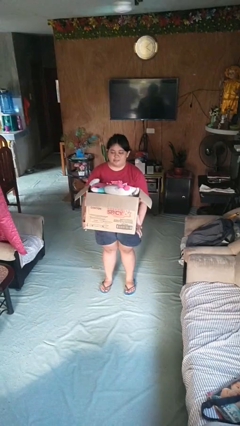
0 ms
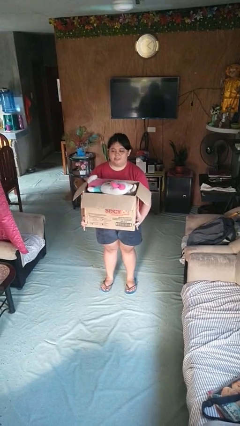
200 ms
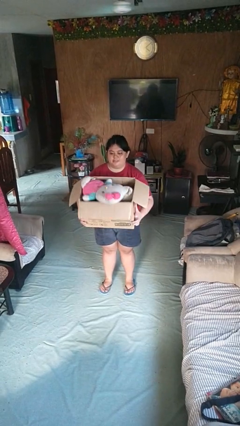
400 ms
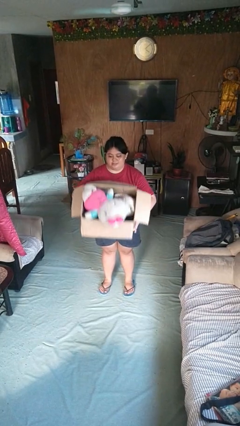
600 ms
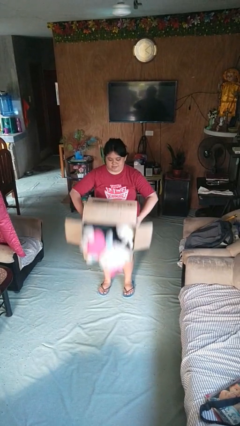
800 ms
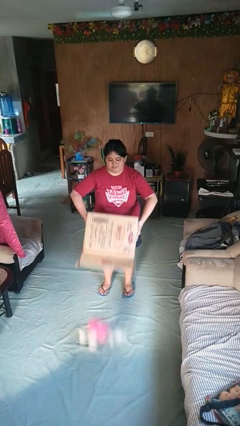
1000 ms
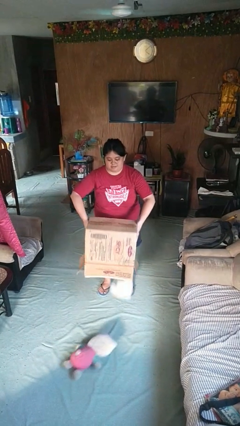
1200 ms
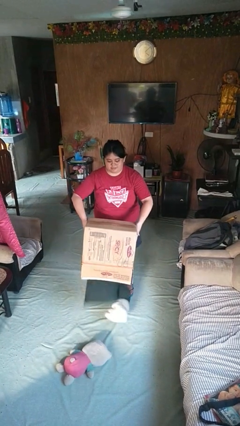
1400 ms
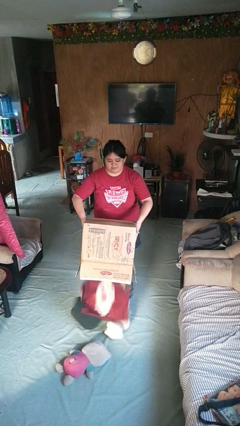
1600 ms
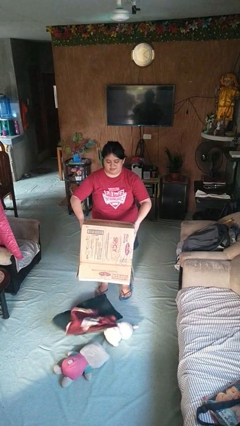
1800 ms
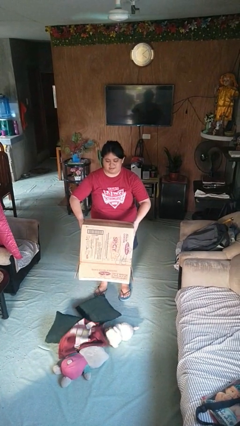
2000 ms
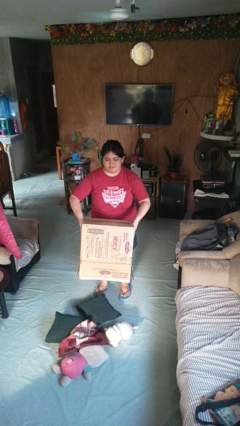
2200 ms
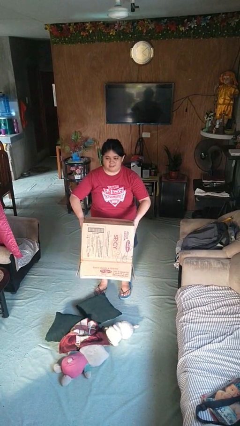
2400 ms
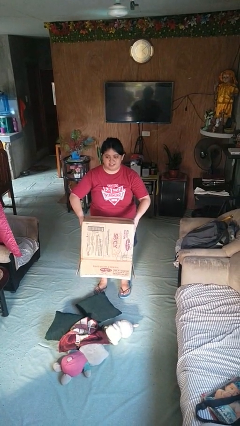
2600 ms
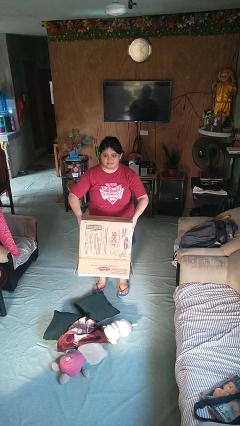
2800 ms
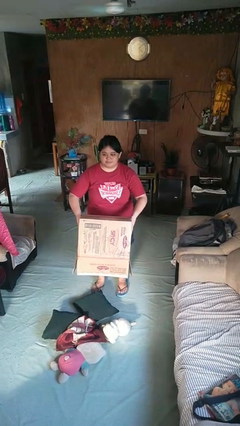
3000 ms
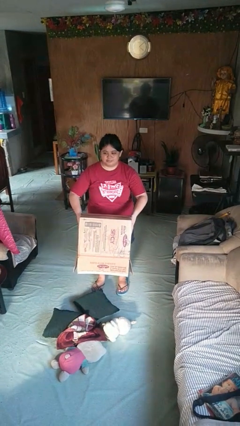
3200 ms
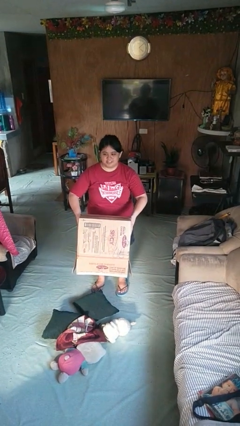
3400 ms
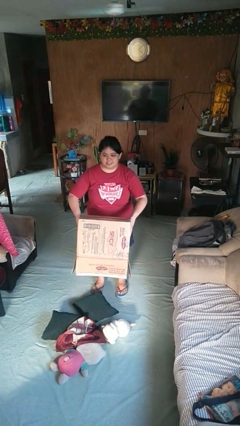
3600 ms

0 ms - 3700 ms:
person unloads box onto floor

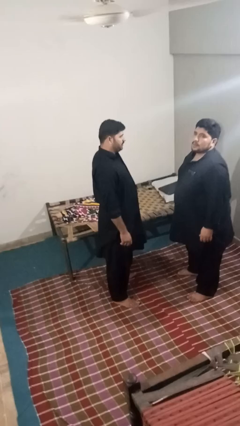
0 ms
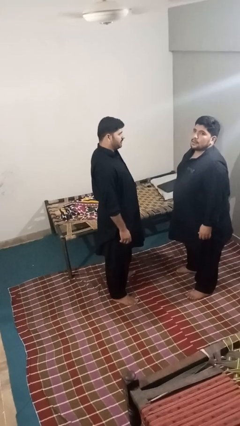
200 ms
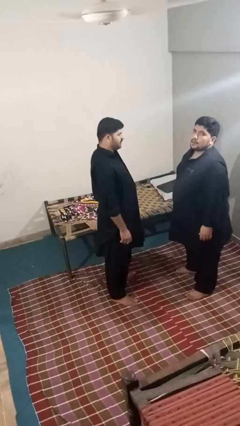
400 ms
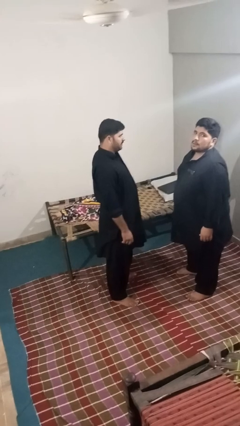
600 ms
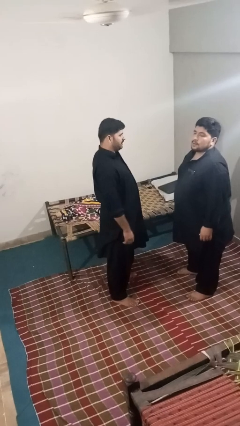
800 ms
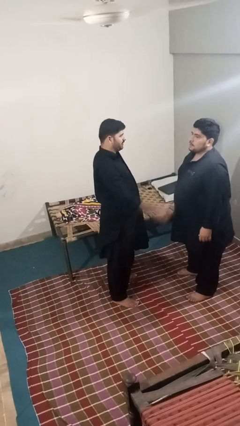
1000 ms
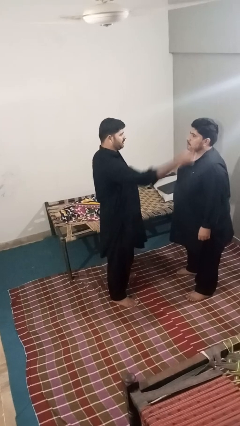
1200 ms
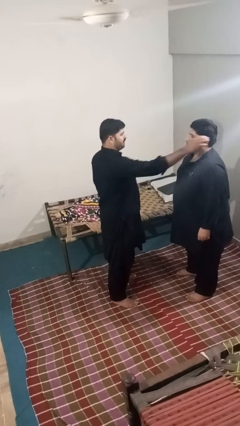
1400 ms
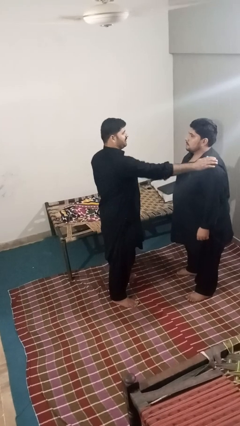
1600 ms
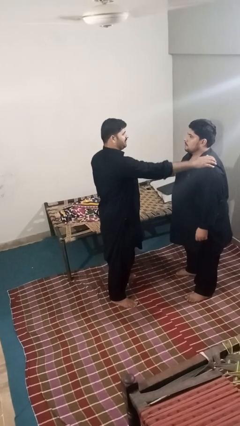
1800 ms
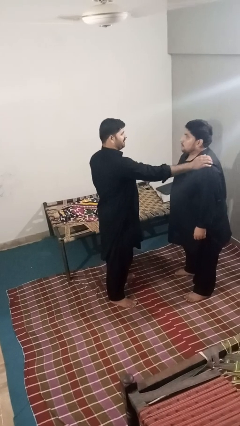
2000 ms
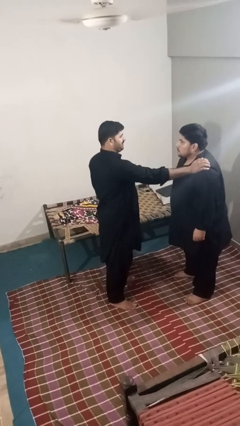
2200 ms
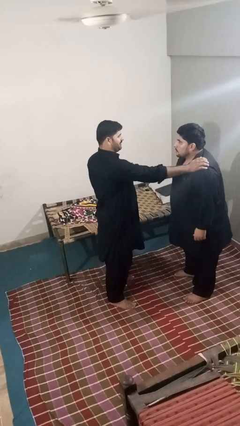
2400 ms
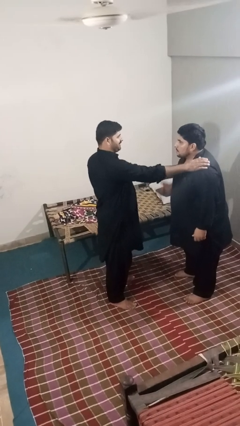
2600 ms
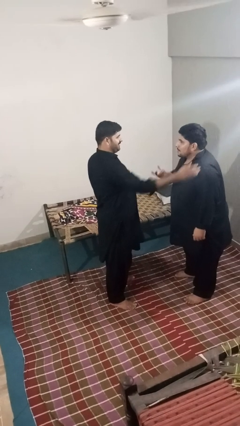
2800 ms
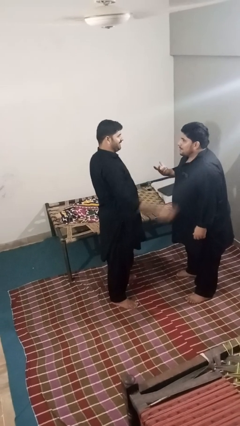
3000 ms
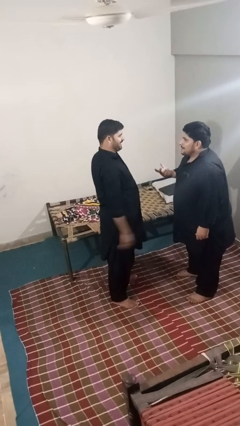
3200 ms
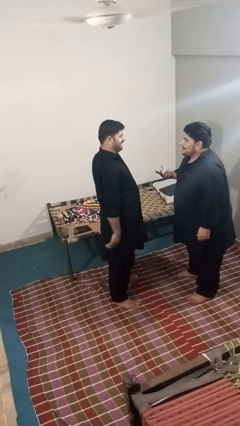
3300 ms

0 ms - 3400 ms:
person pounds shoulders of person

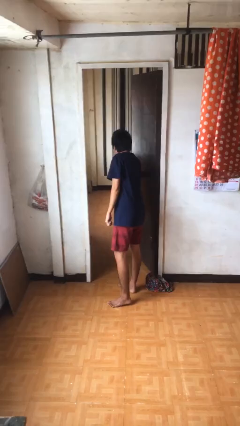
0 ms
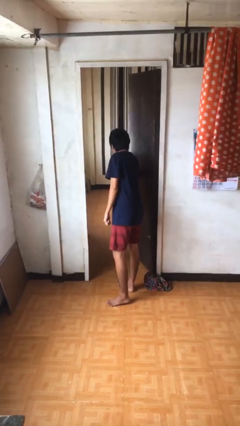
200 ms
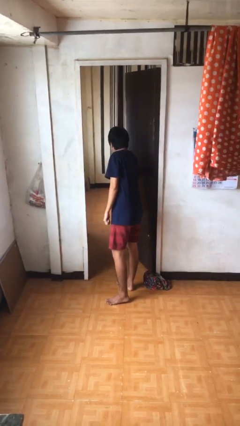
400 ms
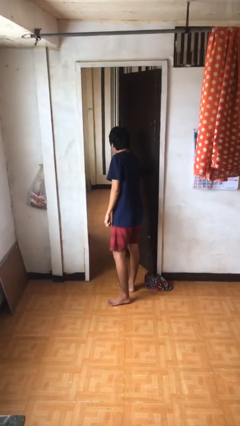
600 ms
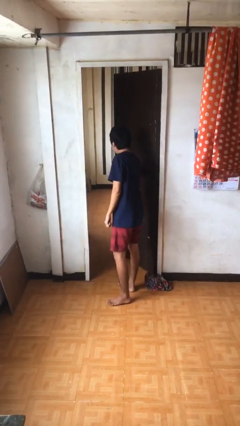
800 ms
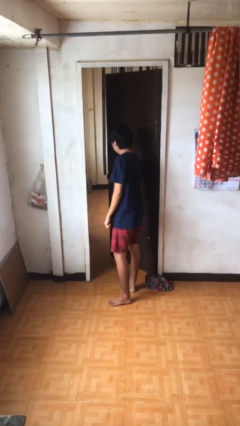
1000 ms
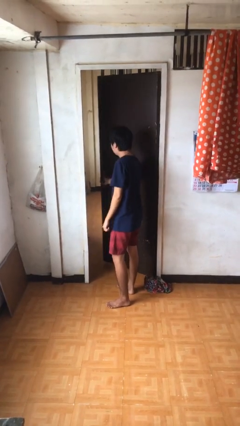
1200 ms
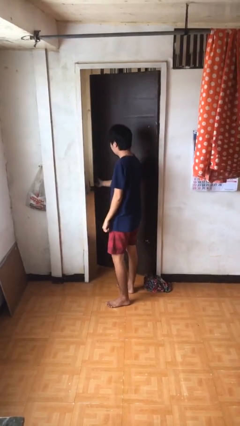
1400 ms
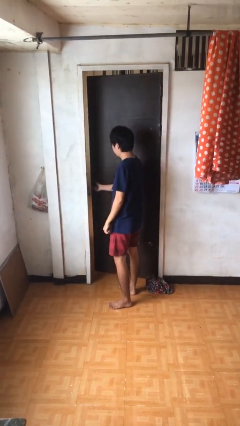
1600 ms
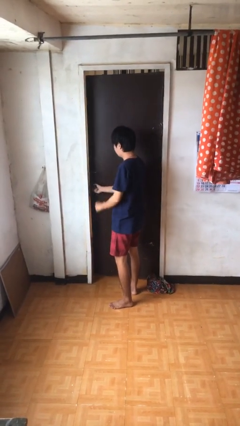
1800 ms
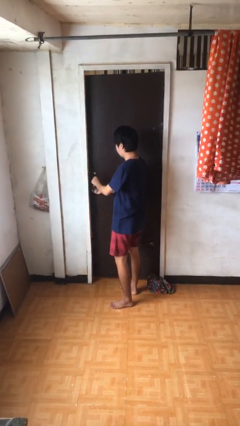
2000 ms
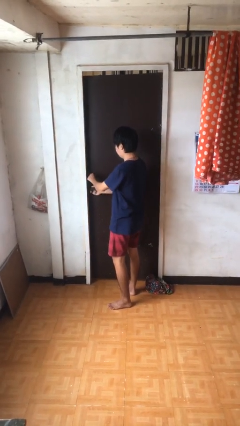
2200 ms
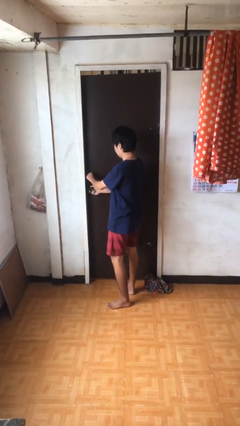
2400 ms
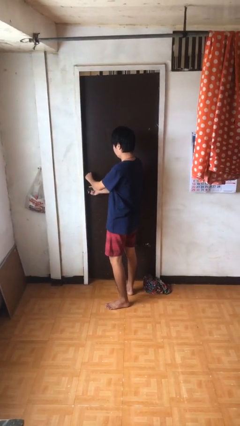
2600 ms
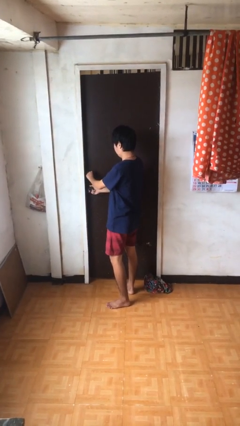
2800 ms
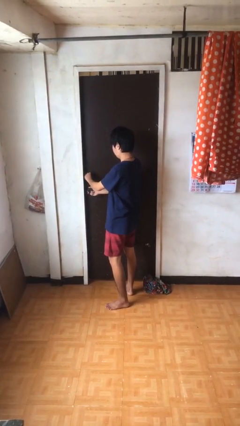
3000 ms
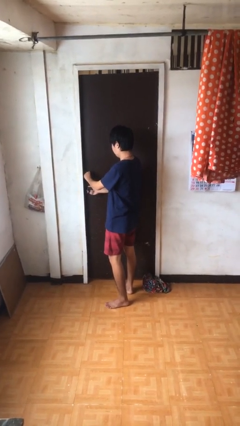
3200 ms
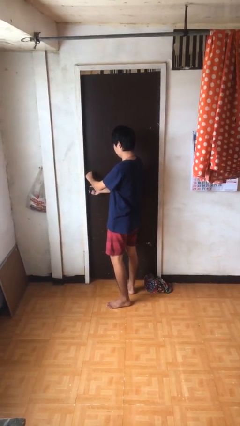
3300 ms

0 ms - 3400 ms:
person closes facility door

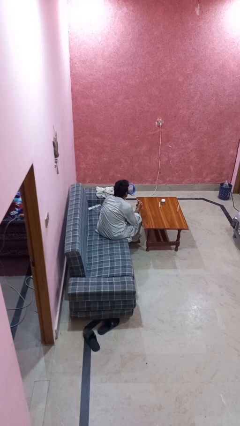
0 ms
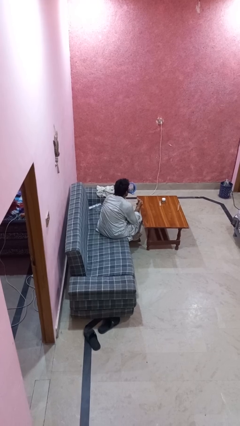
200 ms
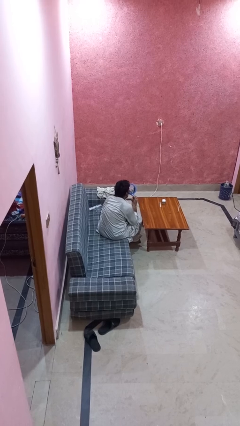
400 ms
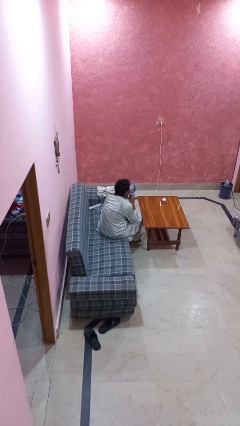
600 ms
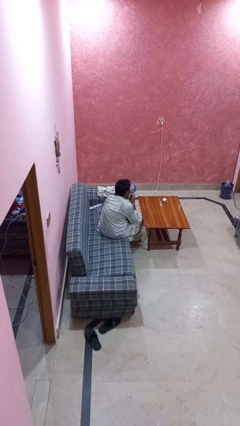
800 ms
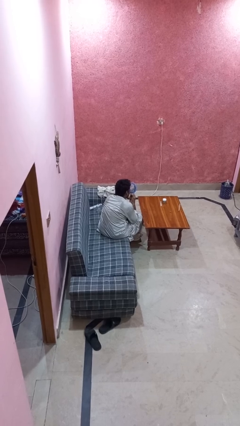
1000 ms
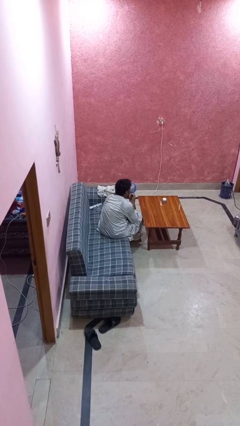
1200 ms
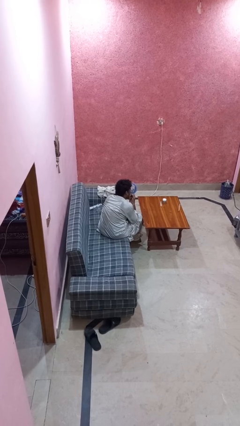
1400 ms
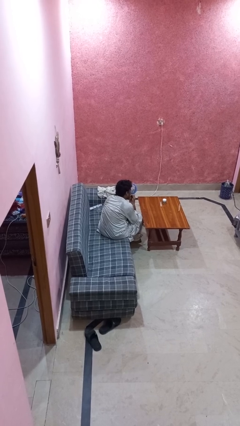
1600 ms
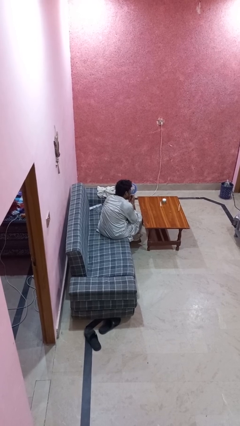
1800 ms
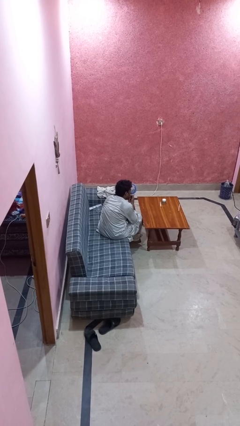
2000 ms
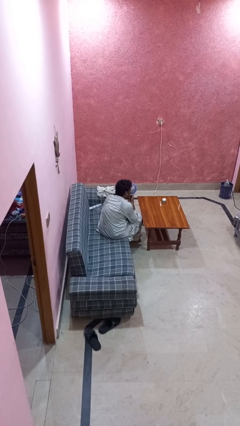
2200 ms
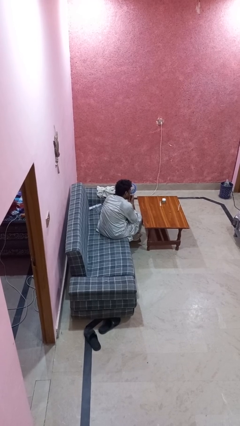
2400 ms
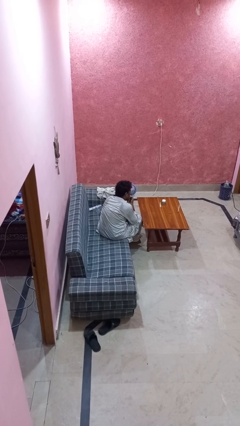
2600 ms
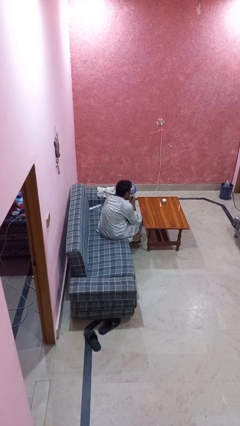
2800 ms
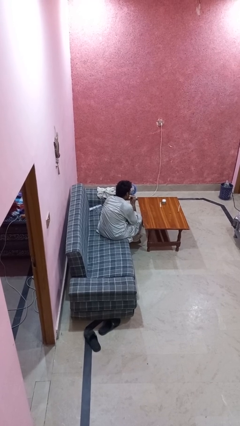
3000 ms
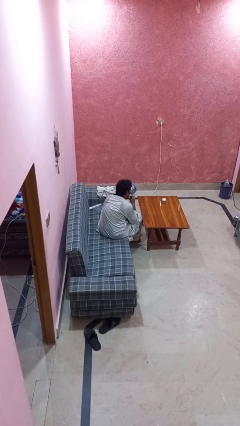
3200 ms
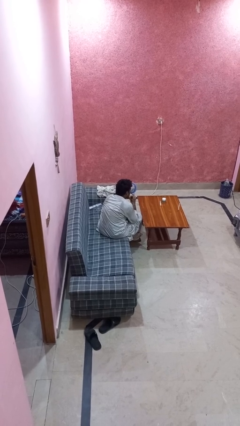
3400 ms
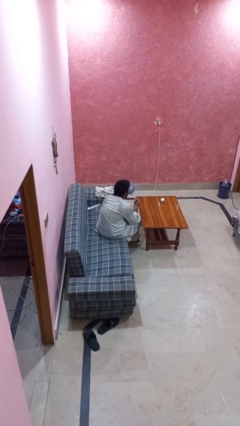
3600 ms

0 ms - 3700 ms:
person applies lip makeup

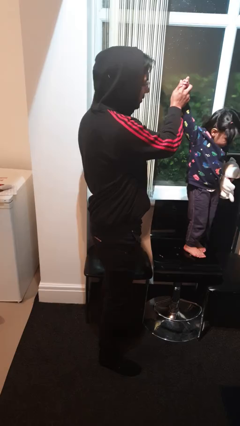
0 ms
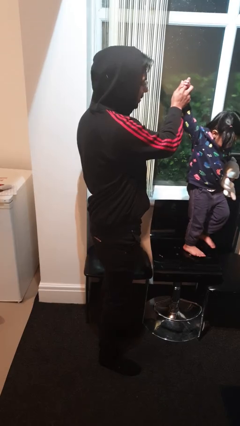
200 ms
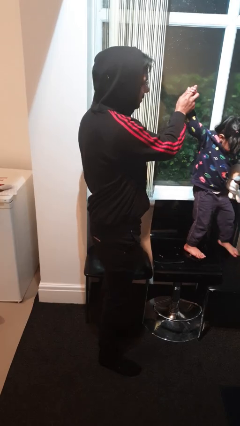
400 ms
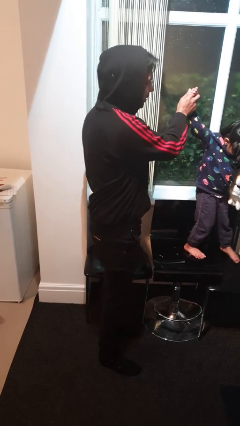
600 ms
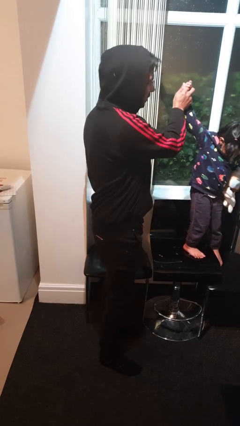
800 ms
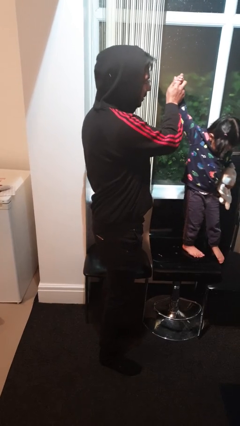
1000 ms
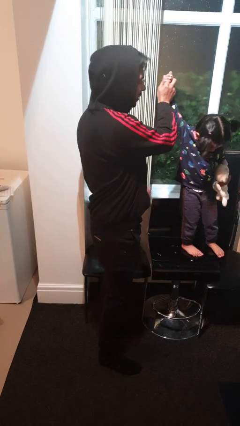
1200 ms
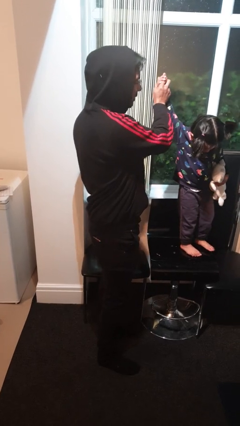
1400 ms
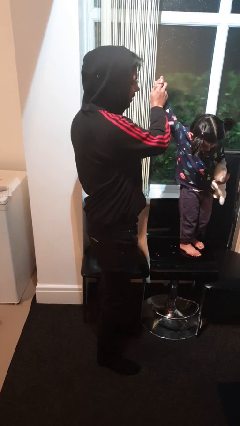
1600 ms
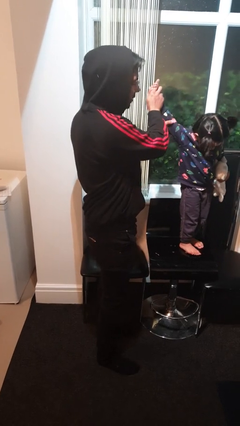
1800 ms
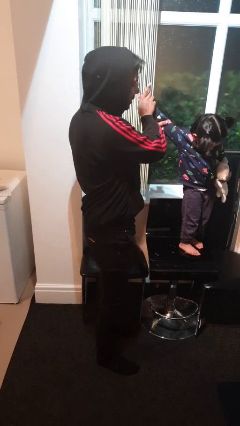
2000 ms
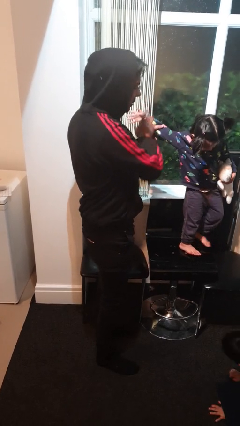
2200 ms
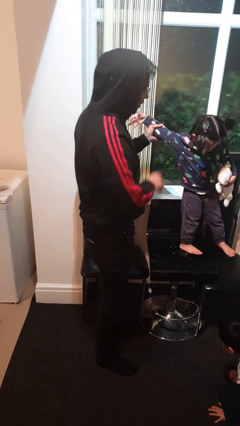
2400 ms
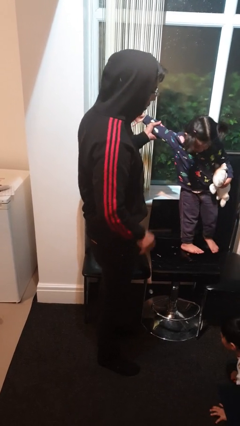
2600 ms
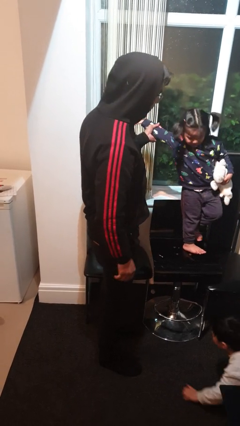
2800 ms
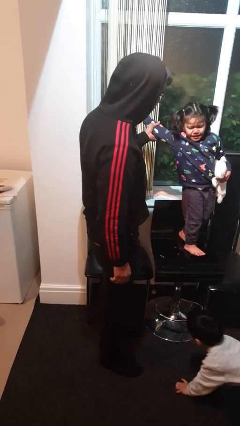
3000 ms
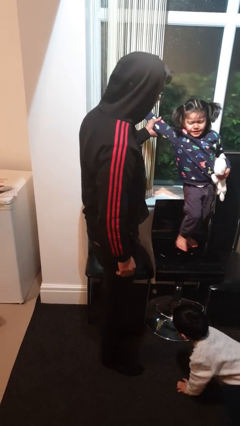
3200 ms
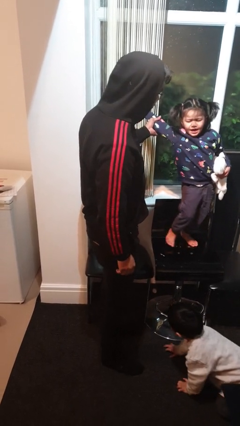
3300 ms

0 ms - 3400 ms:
person highfives hand

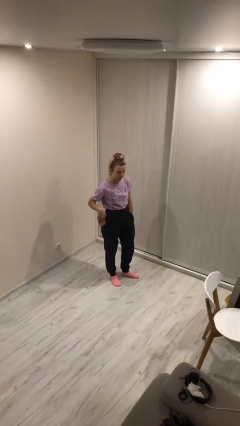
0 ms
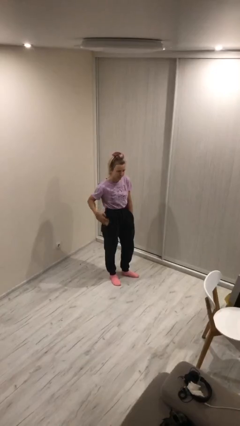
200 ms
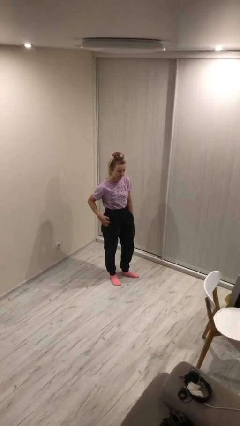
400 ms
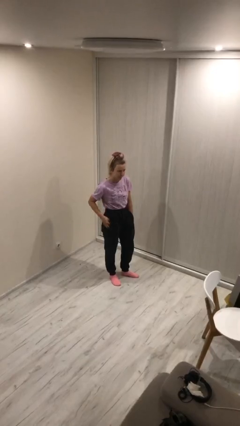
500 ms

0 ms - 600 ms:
person puts phone into pocket
